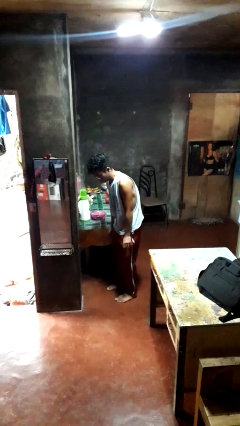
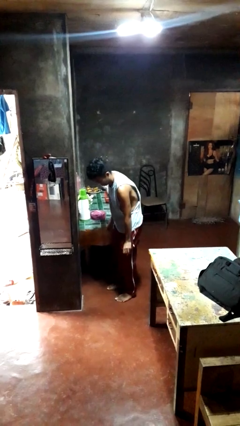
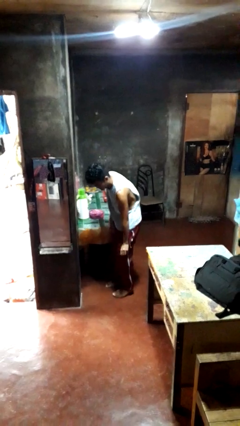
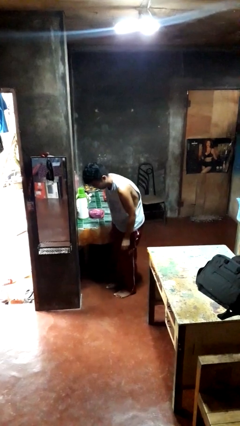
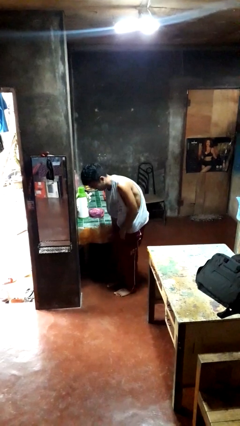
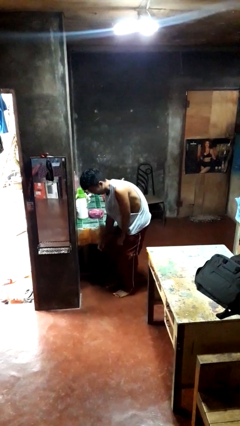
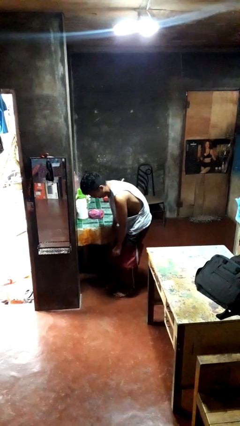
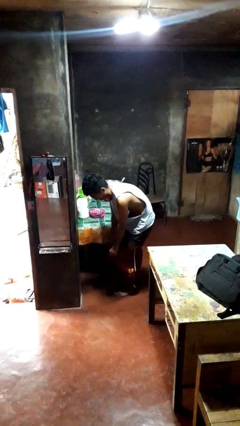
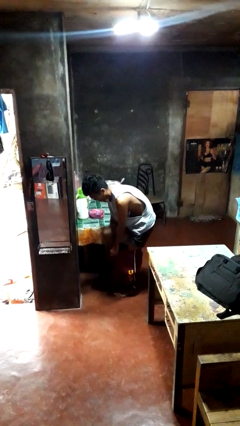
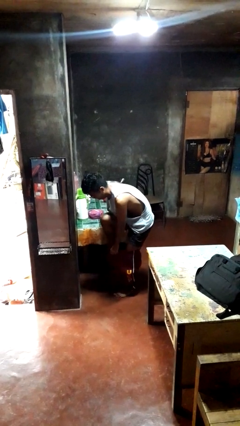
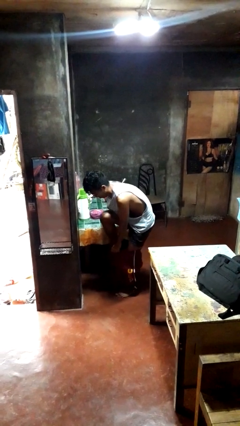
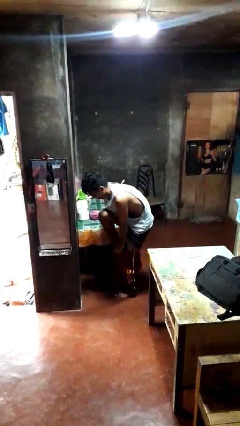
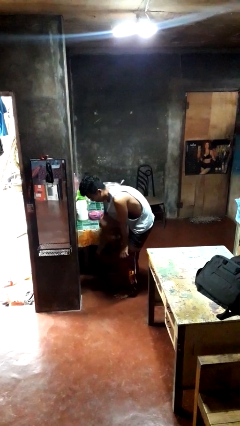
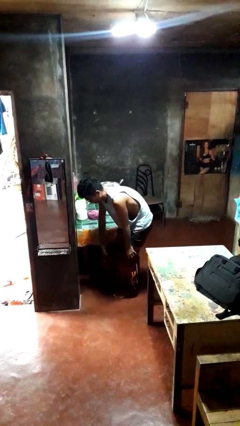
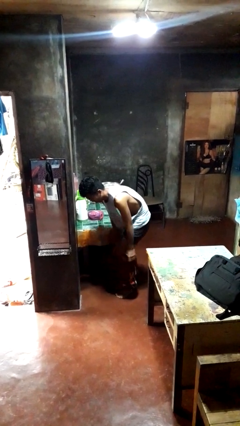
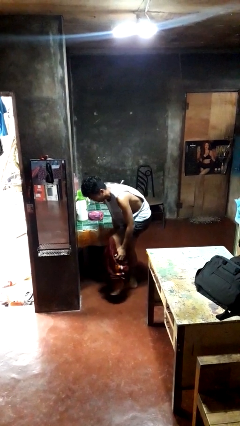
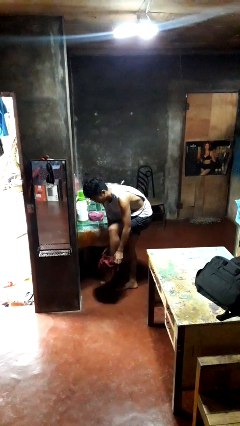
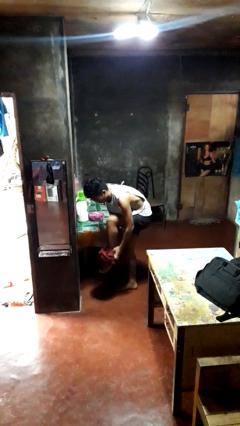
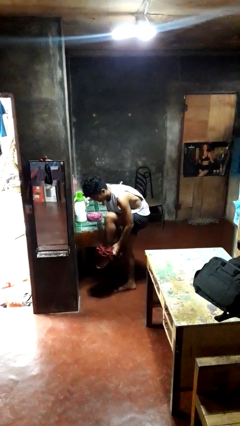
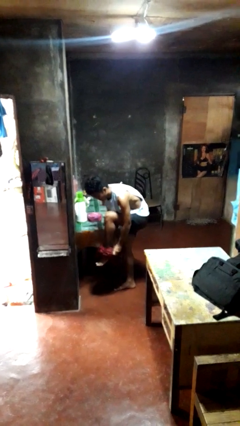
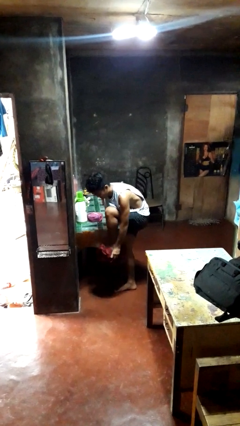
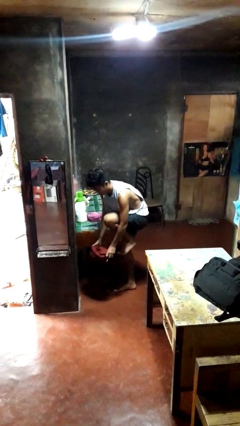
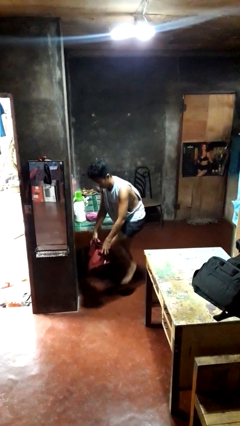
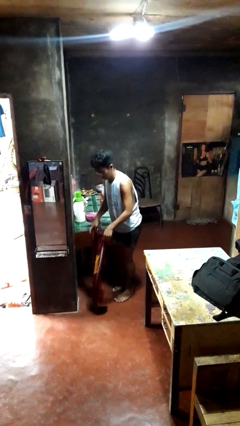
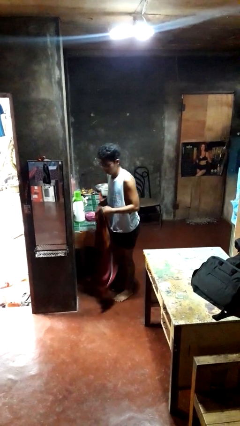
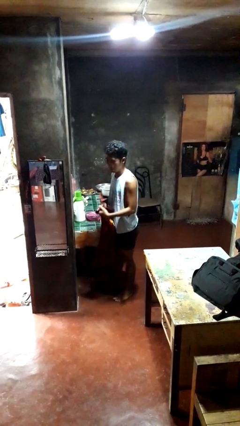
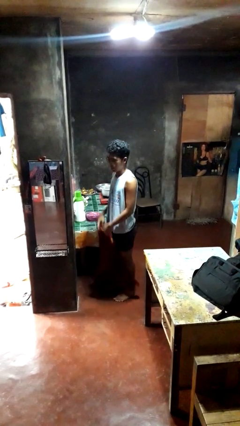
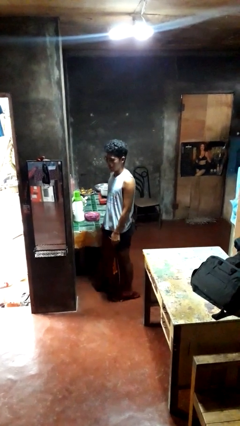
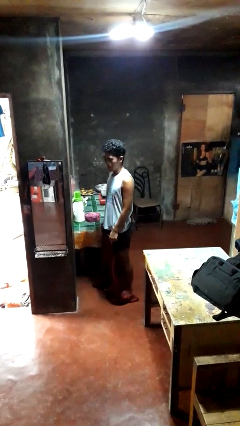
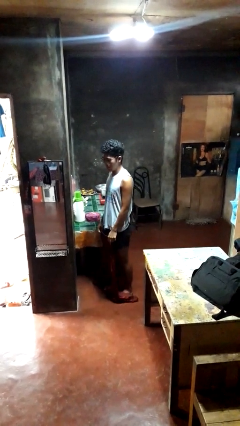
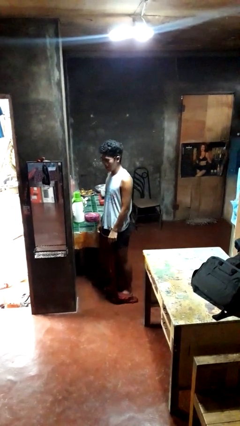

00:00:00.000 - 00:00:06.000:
person takes off pants

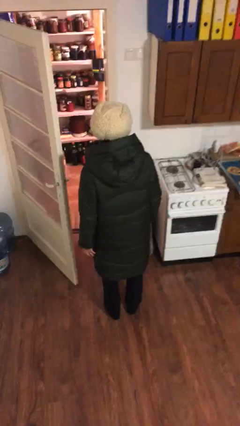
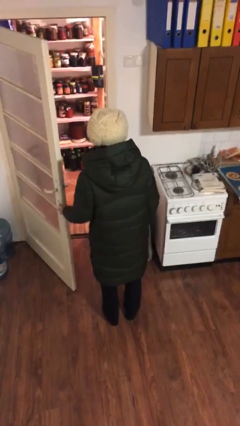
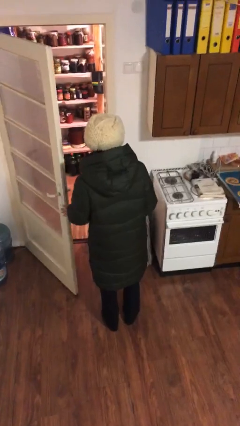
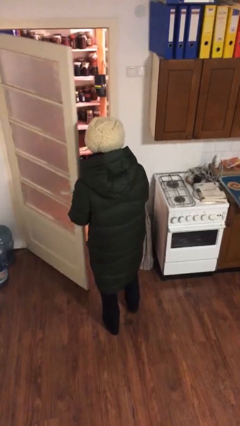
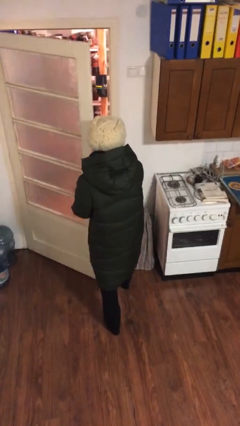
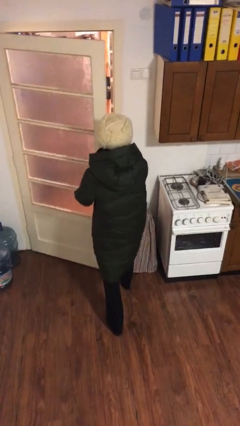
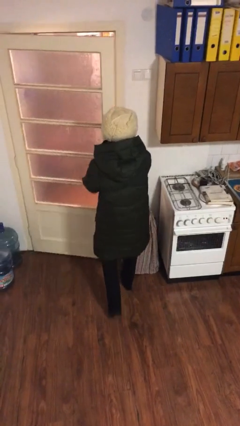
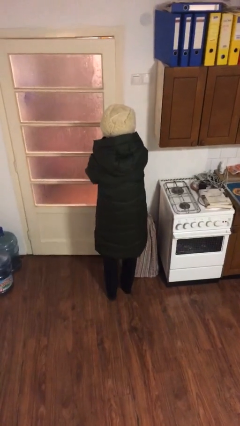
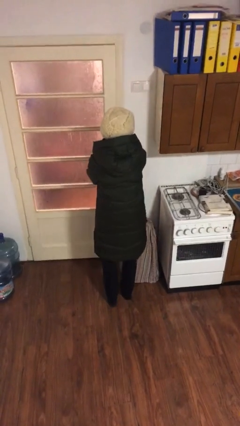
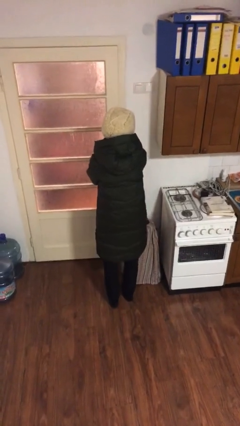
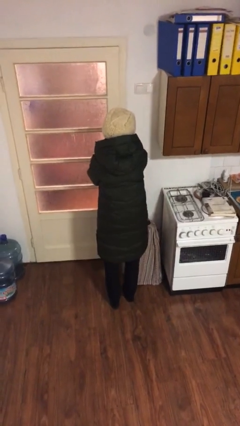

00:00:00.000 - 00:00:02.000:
person closes facility door

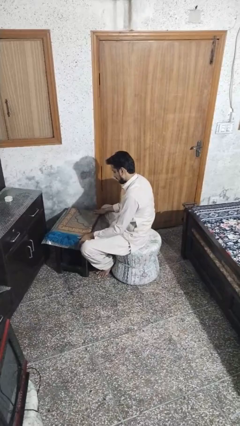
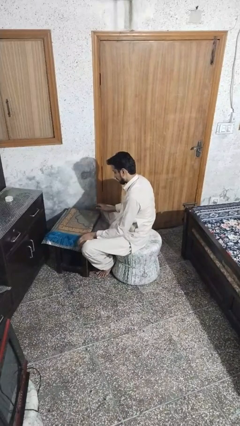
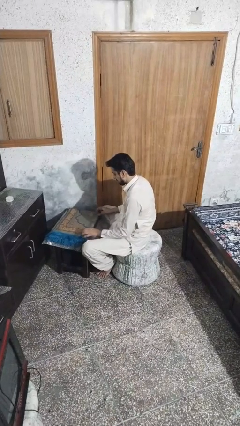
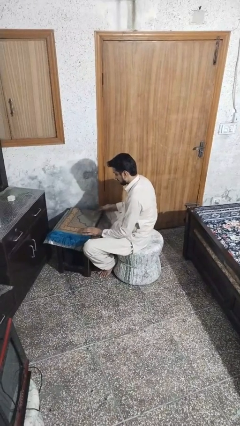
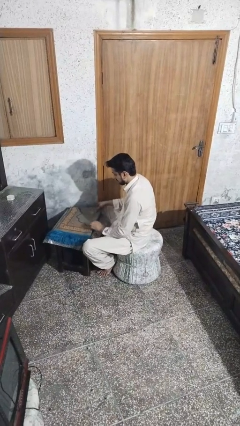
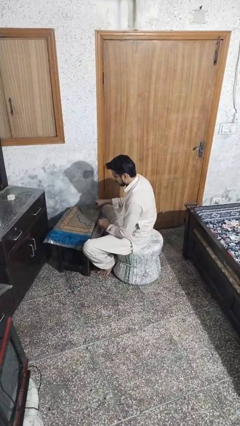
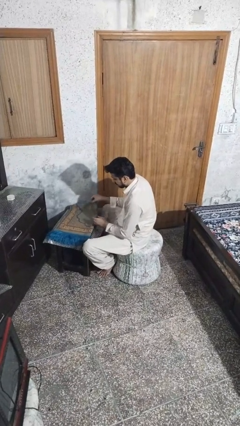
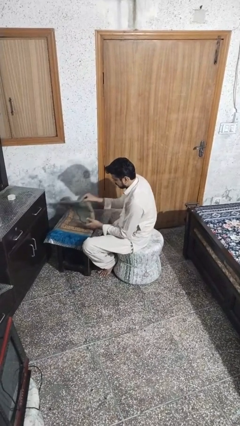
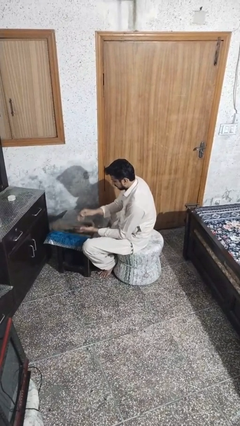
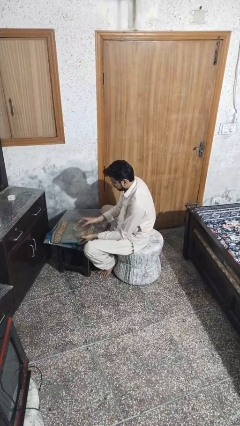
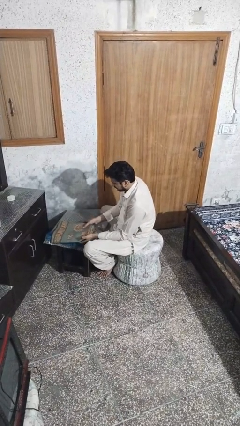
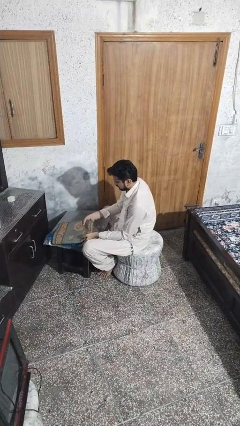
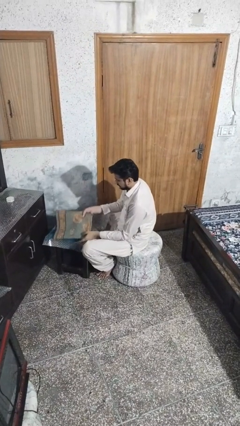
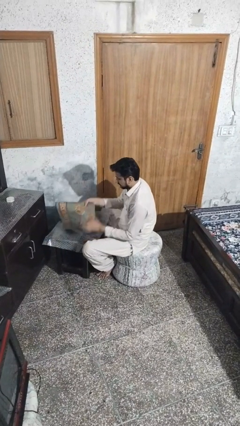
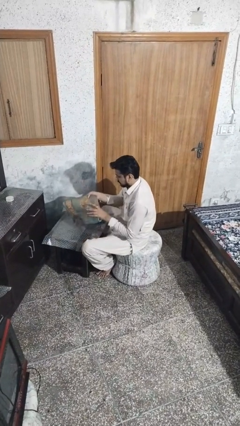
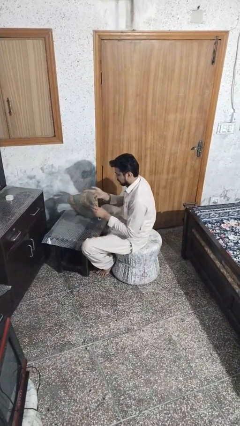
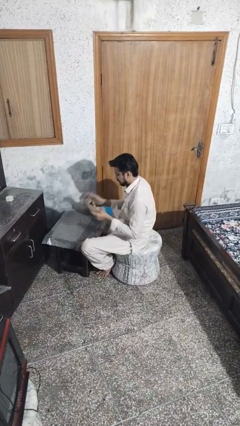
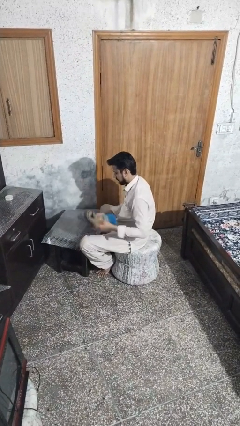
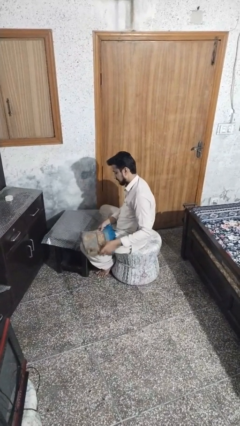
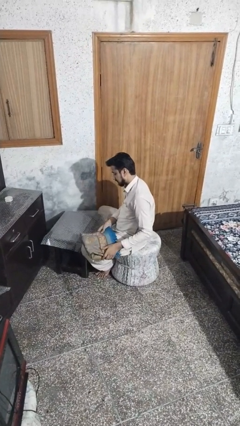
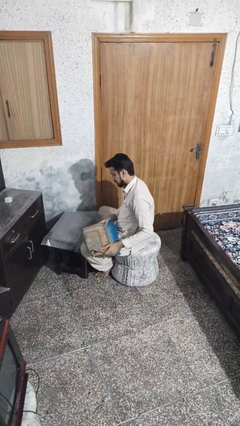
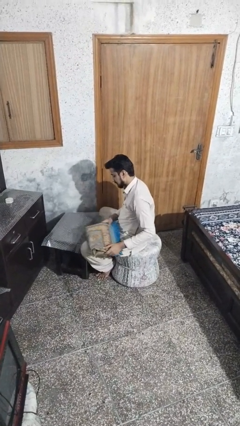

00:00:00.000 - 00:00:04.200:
person folds tablecloth

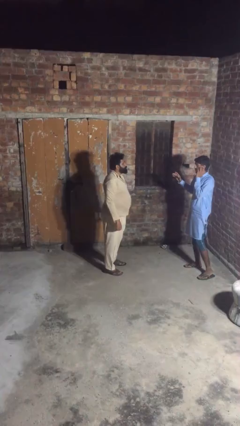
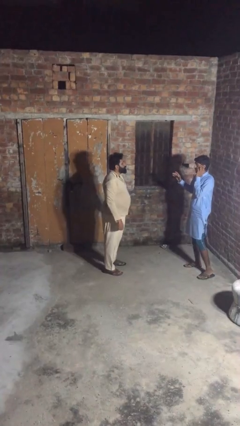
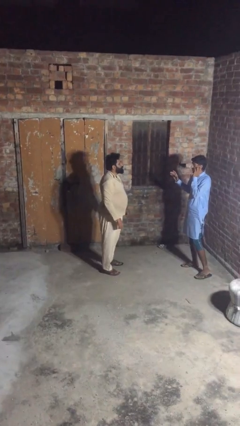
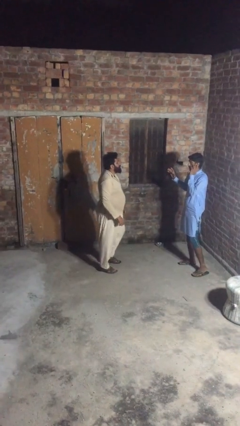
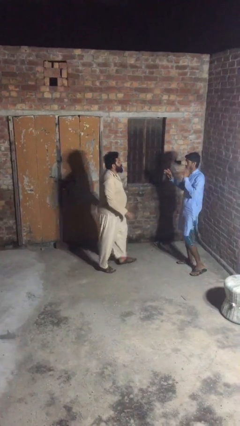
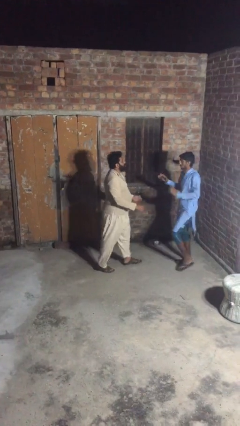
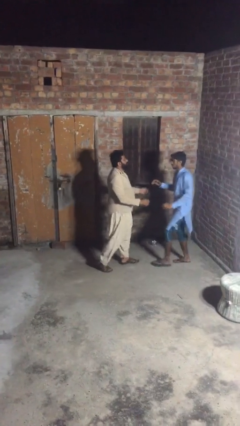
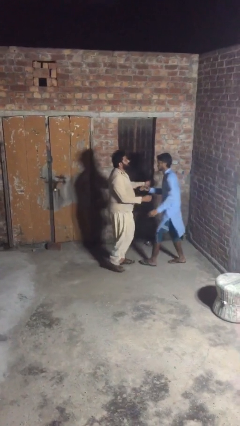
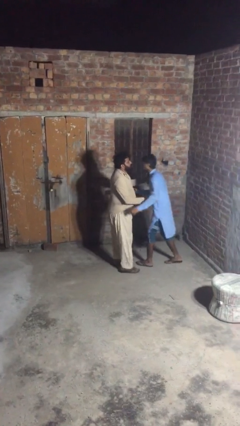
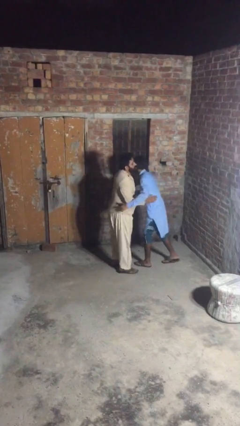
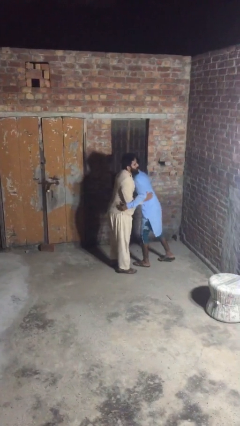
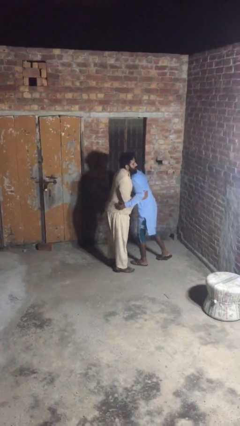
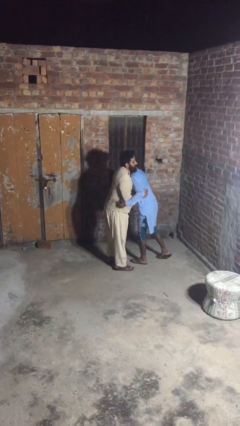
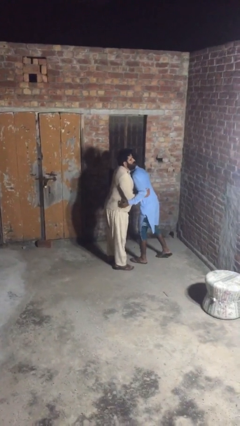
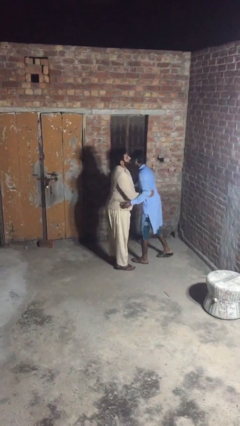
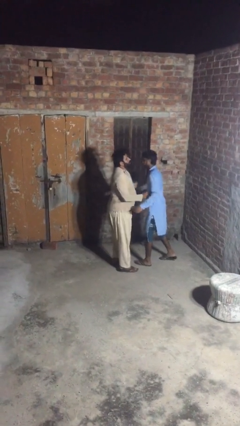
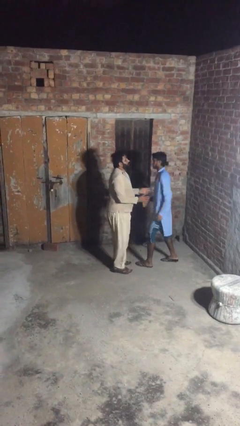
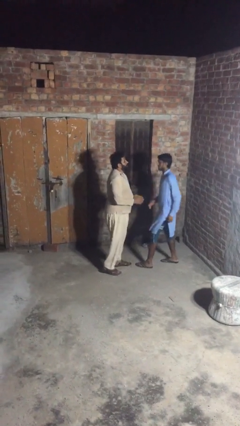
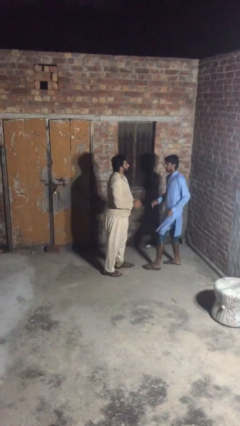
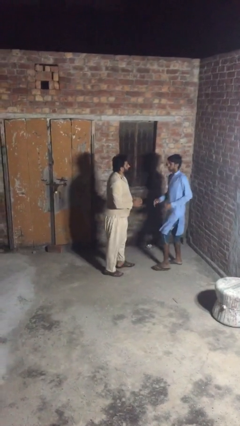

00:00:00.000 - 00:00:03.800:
person embraces person

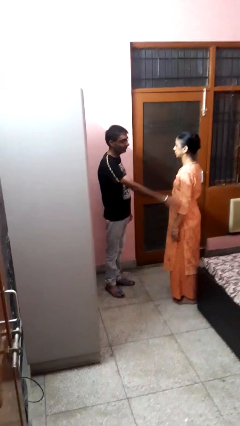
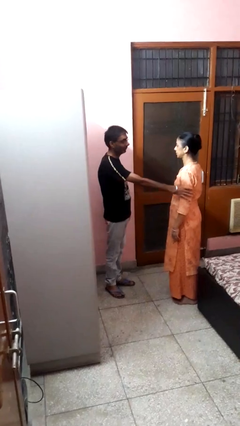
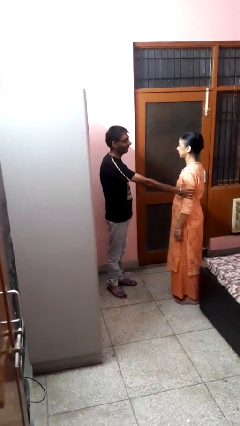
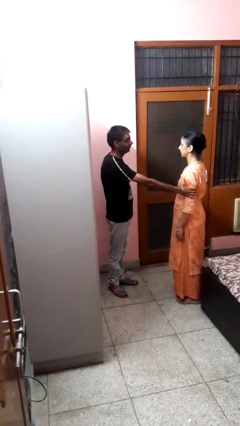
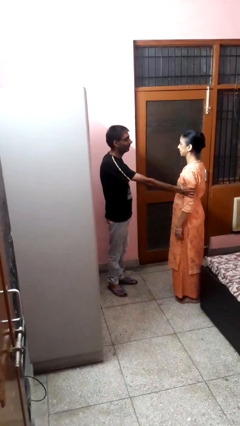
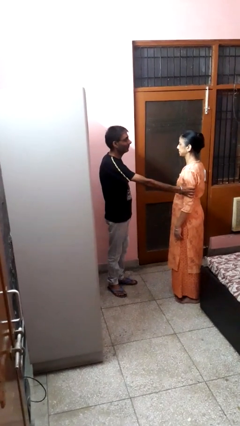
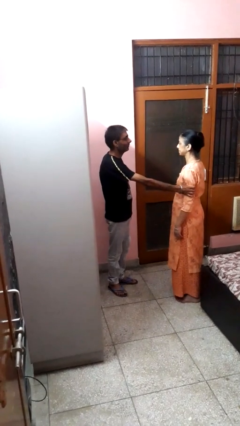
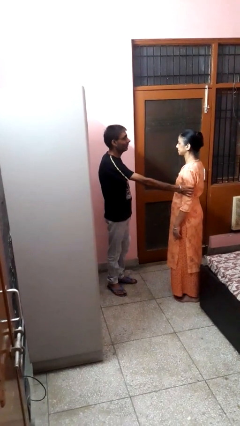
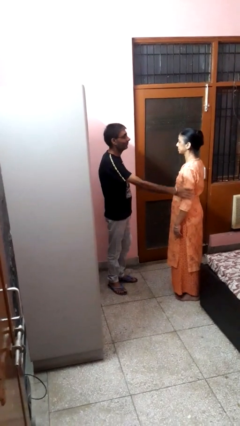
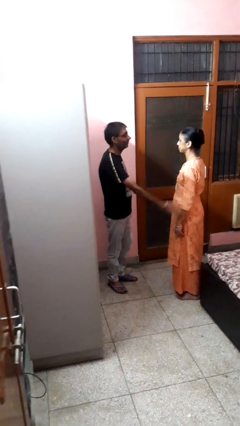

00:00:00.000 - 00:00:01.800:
person grabs person by bicep

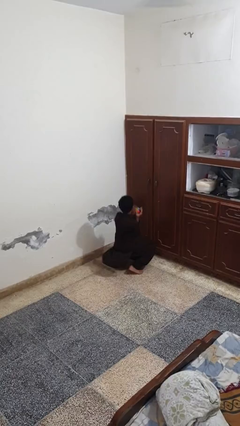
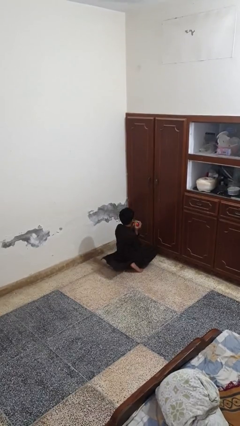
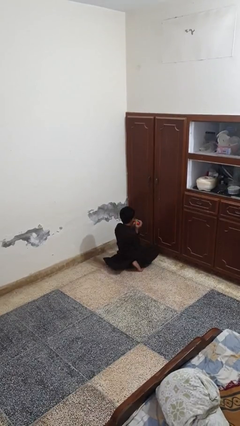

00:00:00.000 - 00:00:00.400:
person catches dropped object
